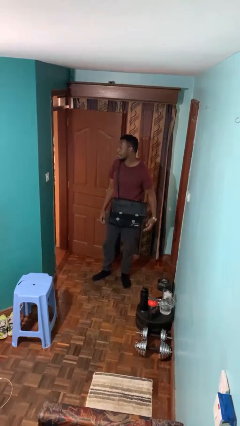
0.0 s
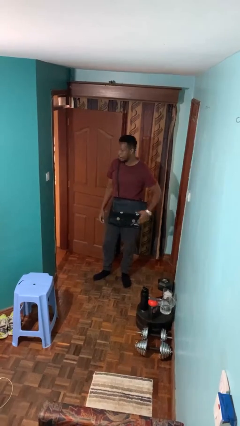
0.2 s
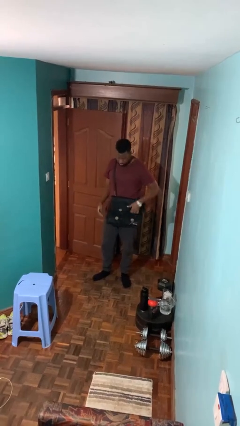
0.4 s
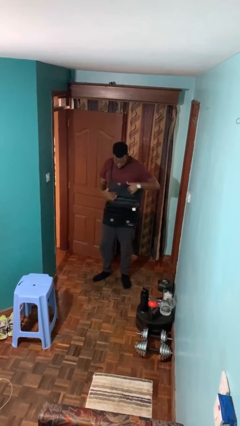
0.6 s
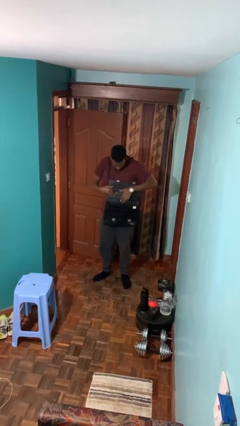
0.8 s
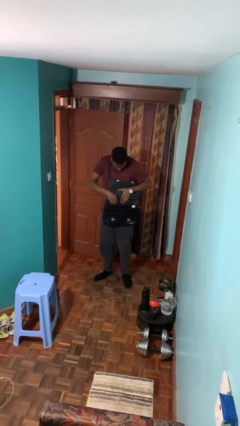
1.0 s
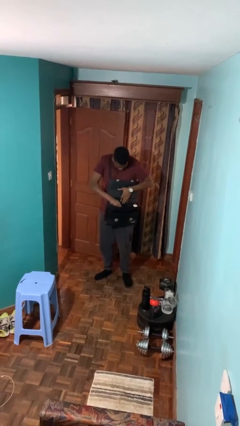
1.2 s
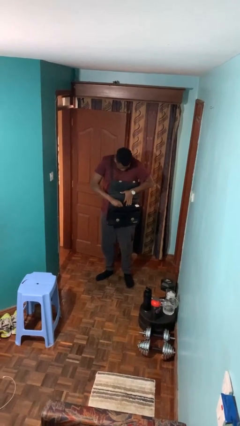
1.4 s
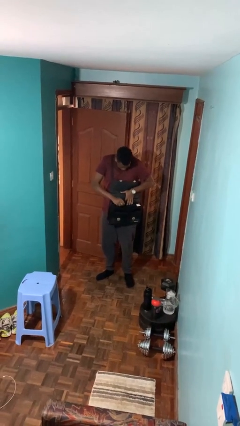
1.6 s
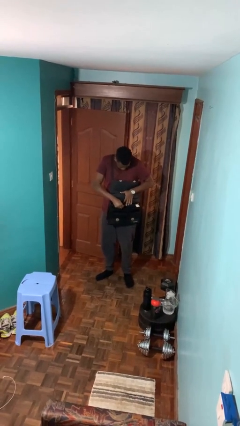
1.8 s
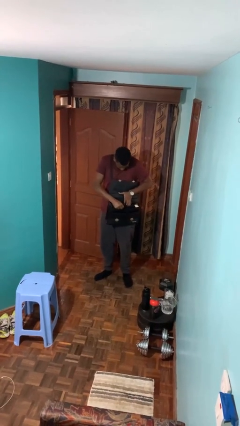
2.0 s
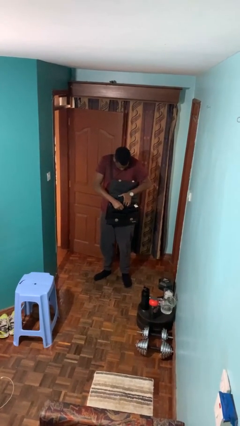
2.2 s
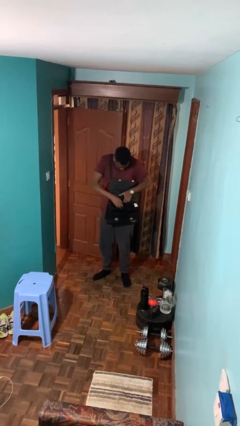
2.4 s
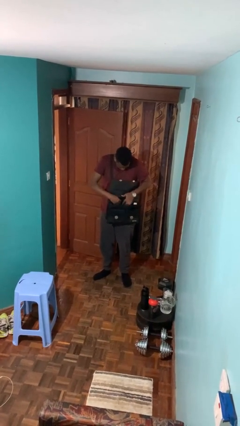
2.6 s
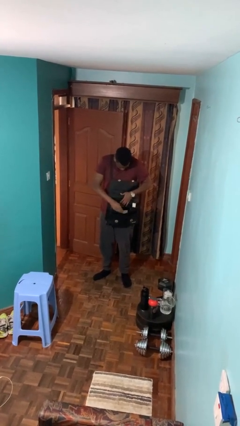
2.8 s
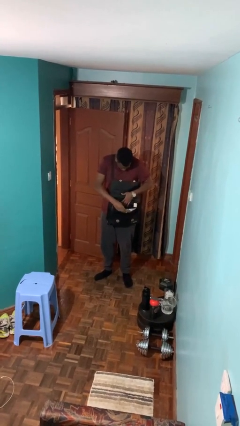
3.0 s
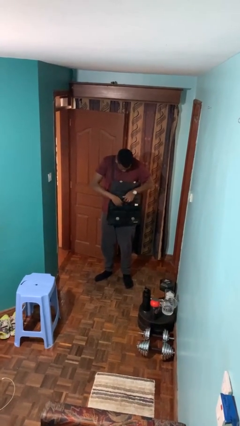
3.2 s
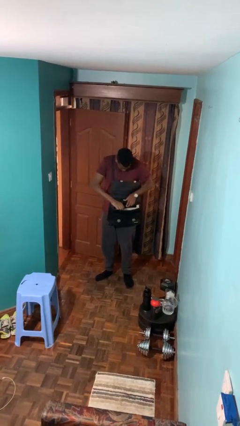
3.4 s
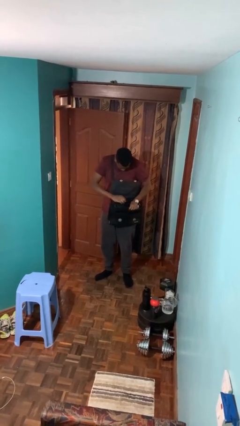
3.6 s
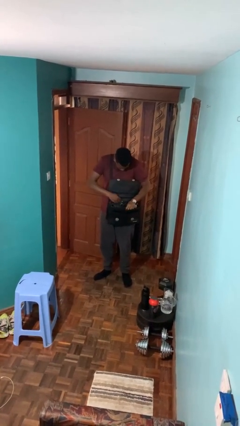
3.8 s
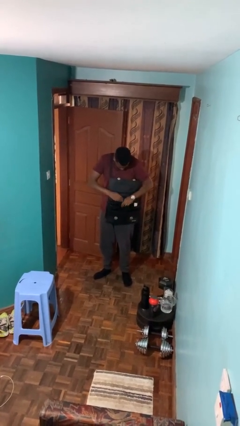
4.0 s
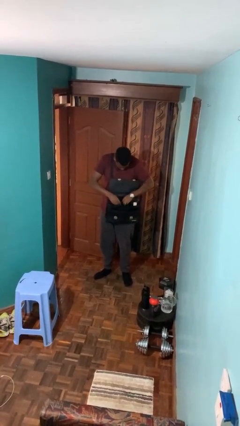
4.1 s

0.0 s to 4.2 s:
person searches in purse

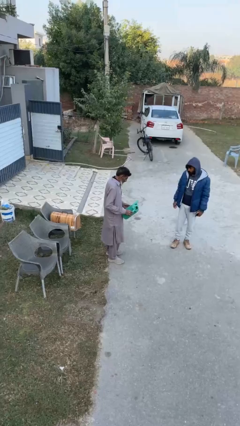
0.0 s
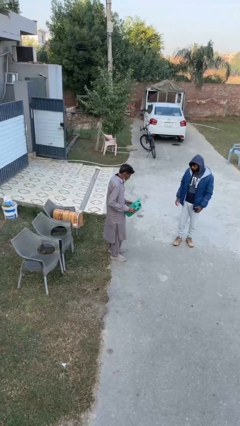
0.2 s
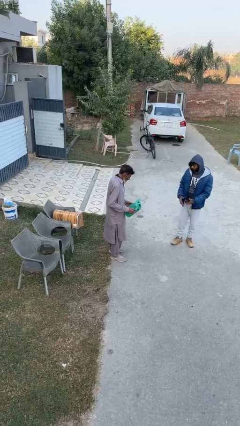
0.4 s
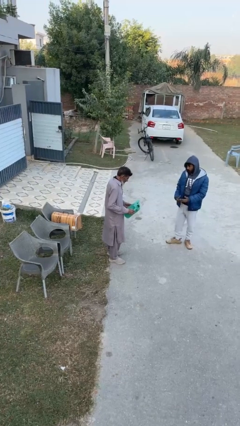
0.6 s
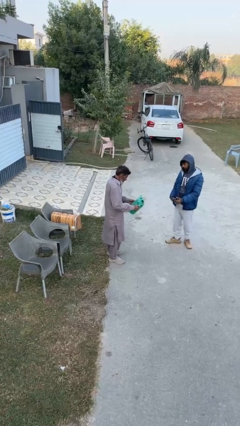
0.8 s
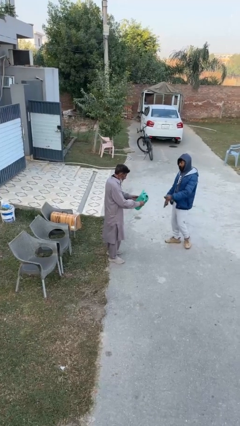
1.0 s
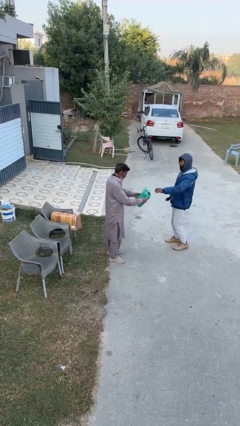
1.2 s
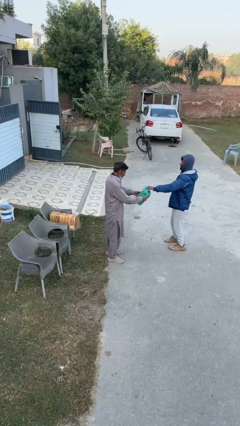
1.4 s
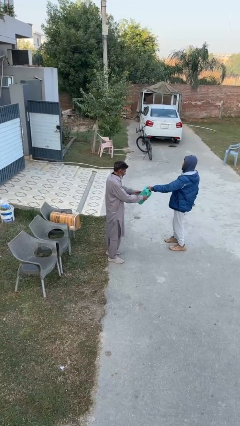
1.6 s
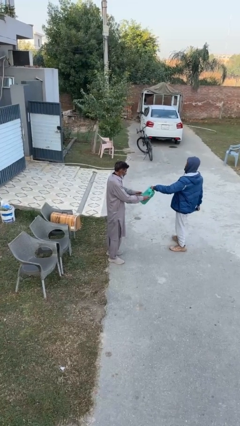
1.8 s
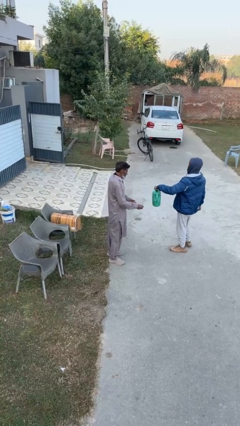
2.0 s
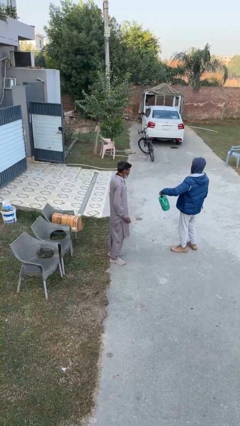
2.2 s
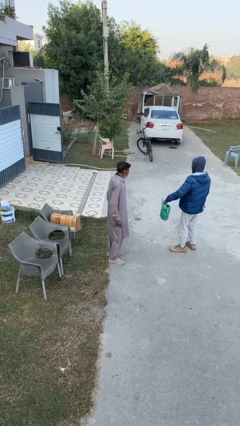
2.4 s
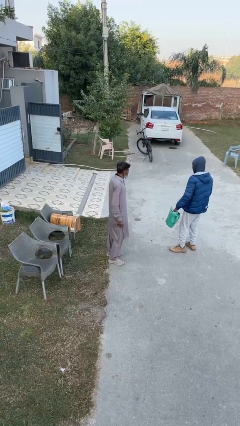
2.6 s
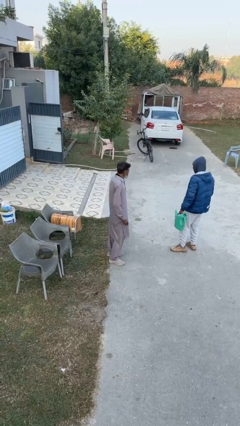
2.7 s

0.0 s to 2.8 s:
person transfers object to person

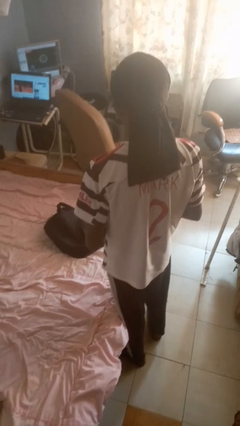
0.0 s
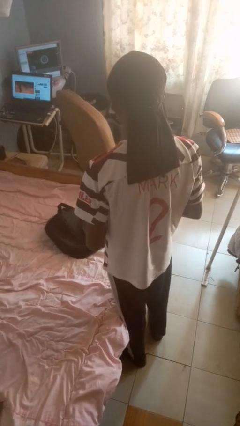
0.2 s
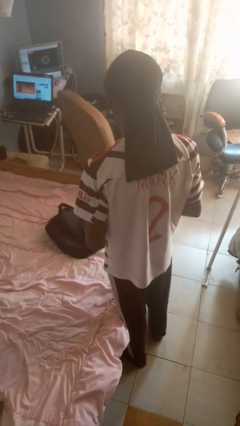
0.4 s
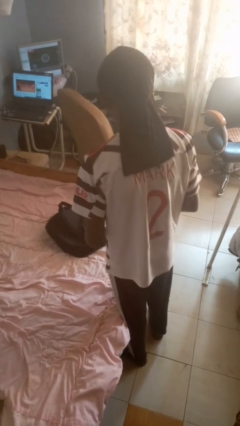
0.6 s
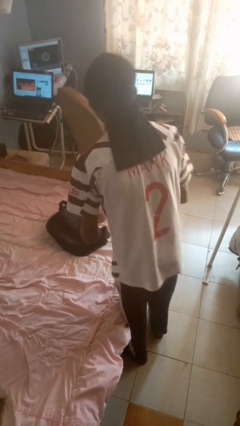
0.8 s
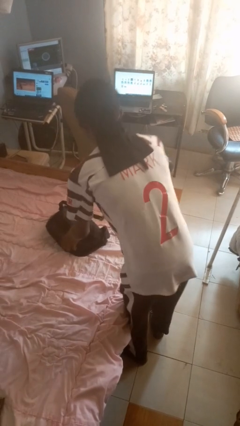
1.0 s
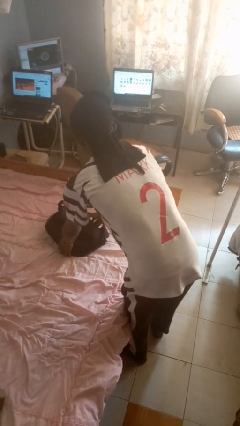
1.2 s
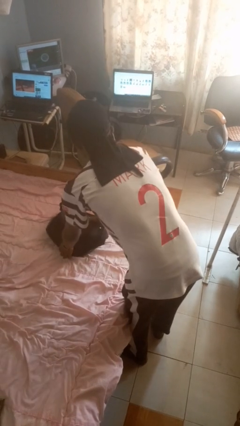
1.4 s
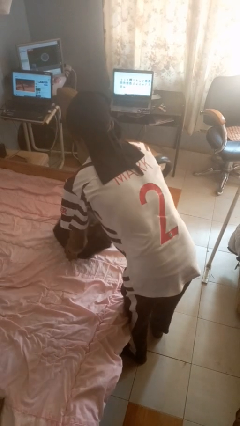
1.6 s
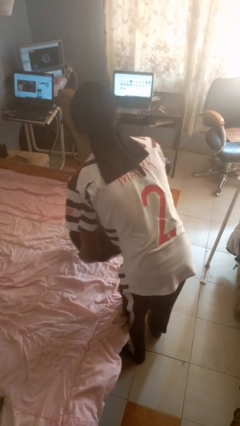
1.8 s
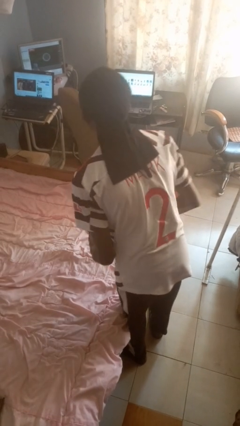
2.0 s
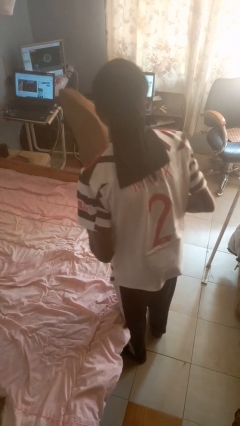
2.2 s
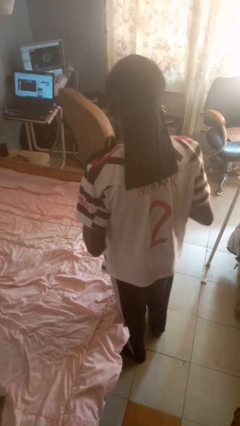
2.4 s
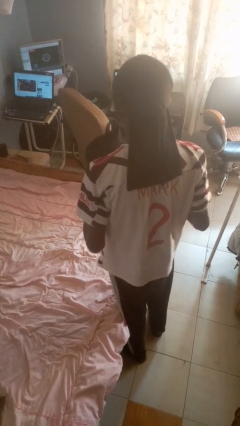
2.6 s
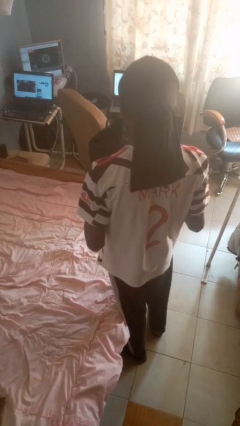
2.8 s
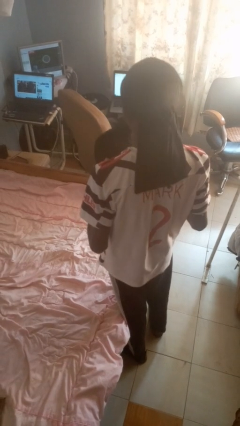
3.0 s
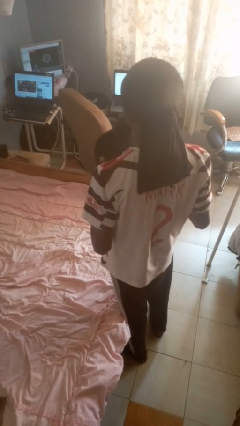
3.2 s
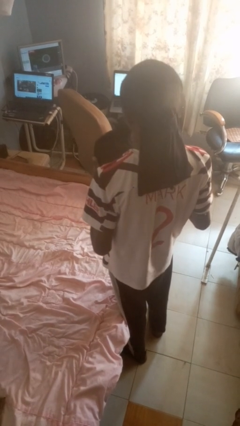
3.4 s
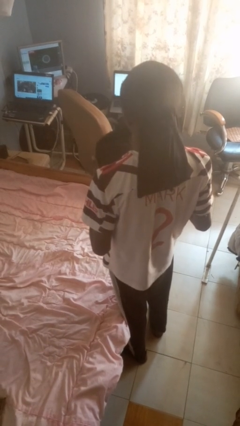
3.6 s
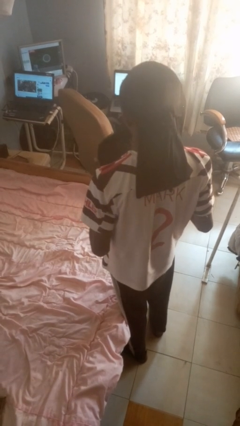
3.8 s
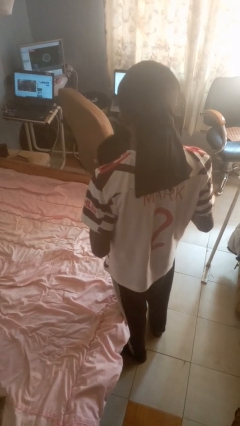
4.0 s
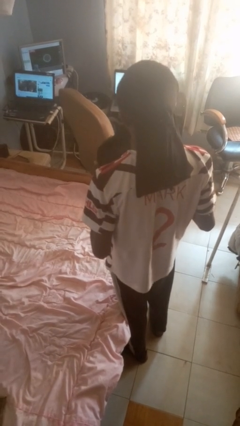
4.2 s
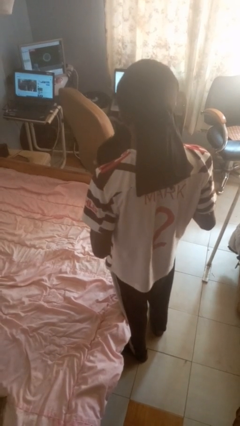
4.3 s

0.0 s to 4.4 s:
person picks up object from bed

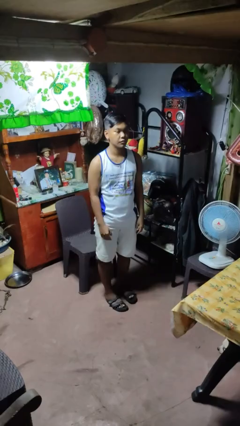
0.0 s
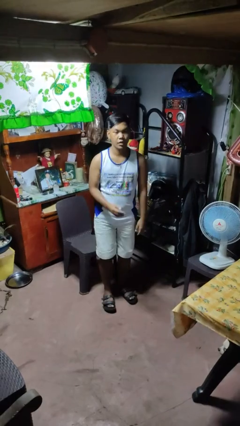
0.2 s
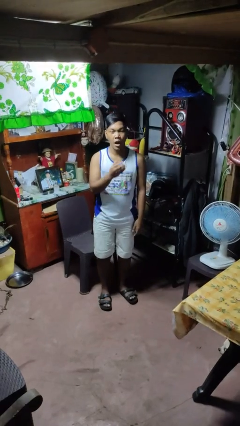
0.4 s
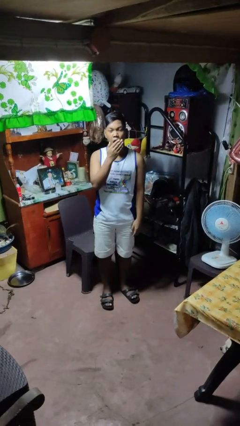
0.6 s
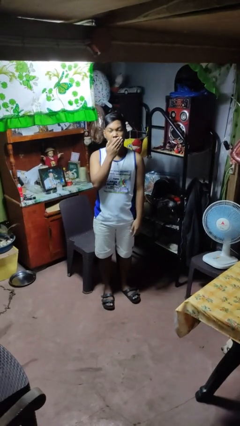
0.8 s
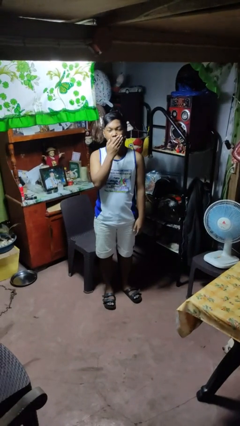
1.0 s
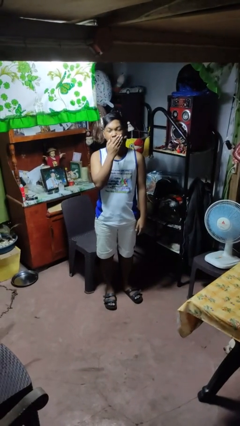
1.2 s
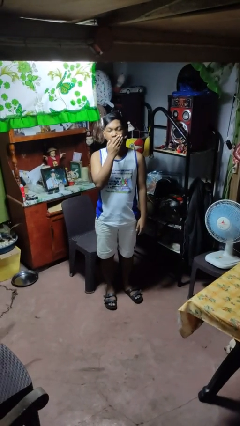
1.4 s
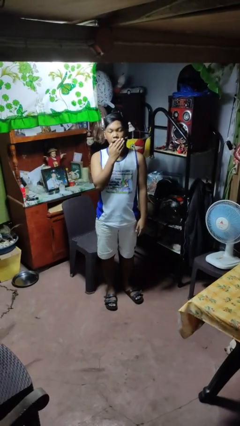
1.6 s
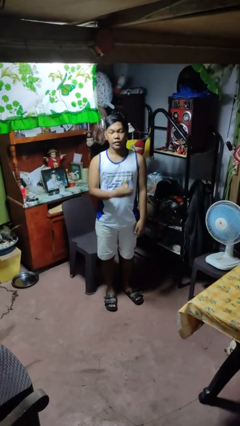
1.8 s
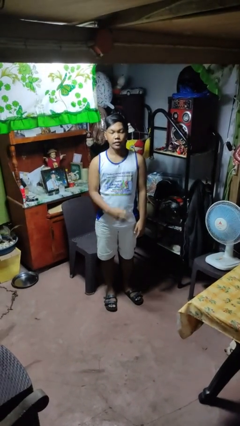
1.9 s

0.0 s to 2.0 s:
person yawns

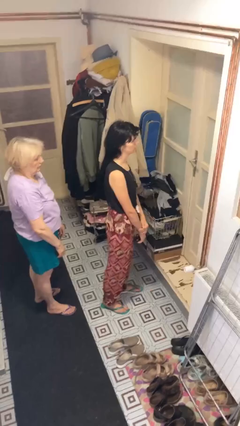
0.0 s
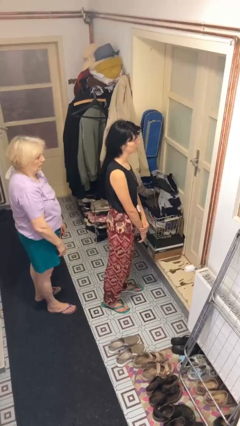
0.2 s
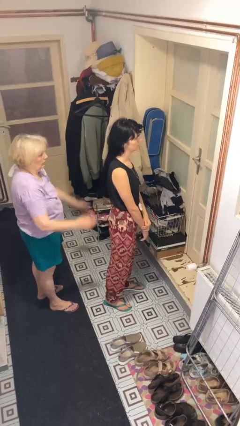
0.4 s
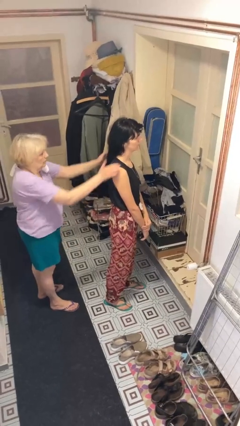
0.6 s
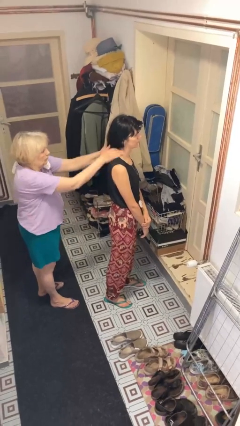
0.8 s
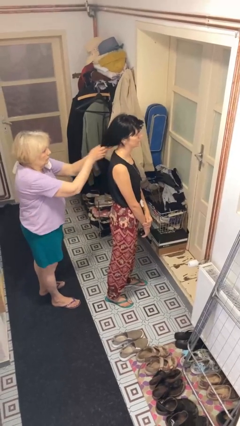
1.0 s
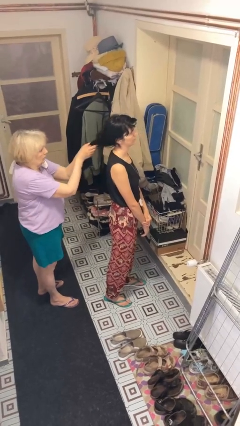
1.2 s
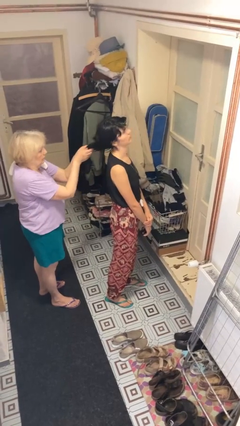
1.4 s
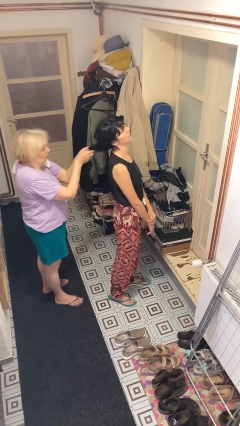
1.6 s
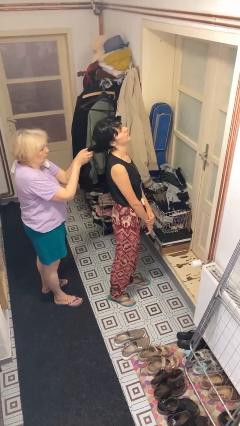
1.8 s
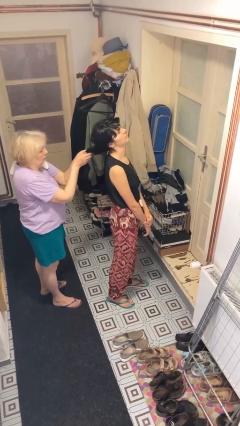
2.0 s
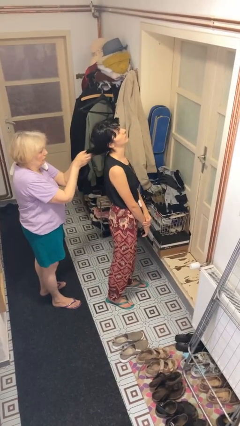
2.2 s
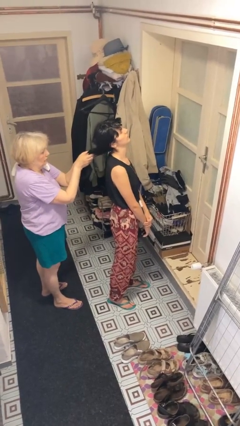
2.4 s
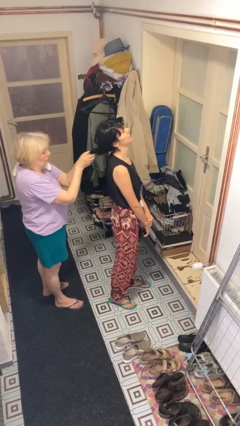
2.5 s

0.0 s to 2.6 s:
person grabs person by hair

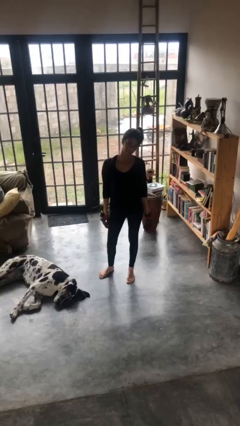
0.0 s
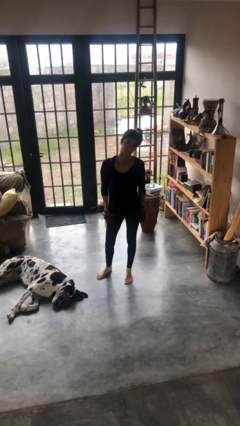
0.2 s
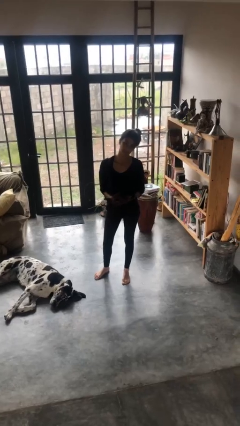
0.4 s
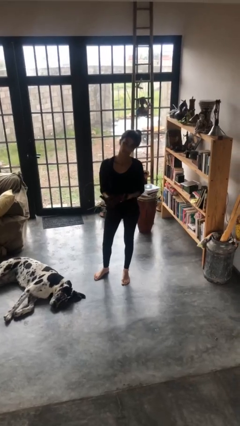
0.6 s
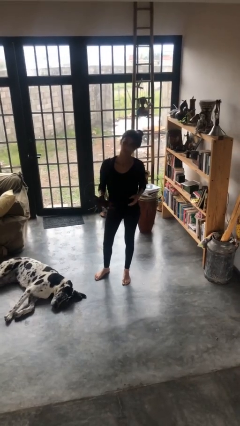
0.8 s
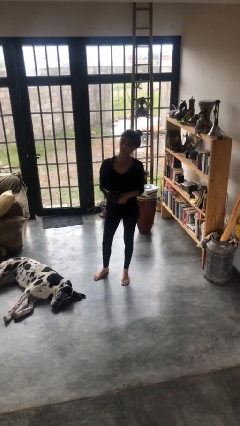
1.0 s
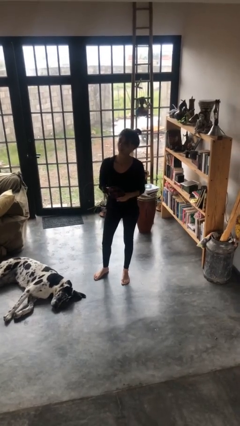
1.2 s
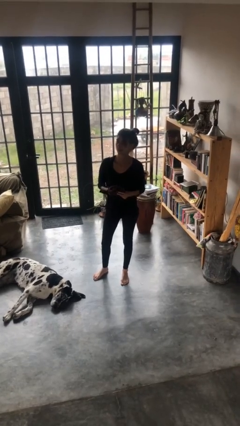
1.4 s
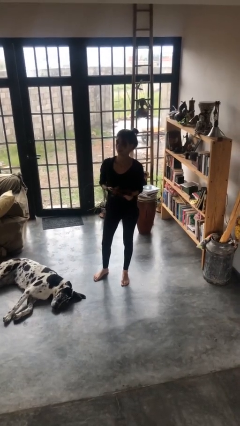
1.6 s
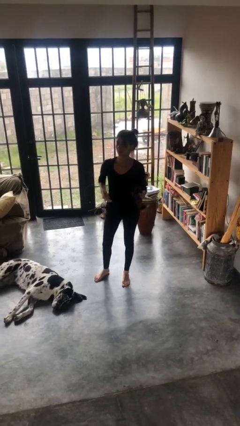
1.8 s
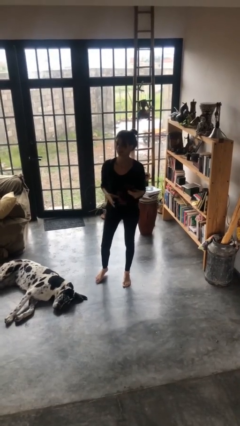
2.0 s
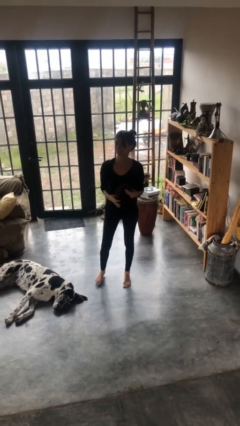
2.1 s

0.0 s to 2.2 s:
person takes off gloves
